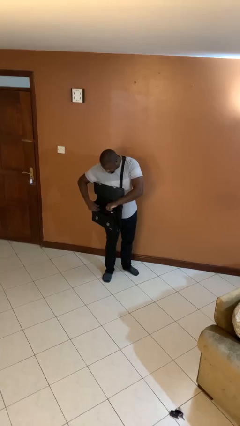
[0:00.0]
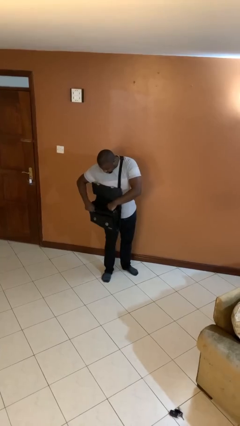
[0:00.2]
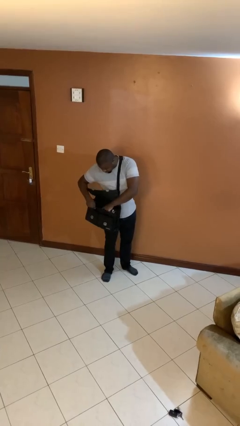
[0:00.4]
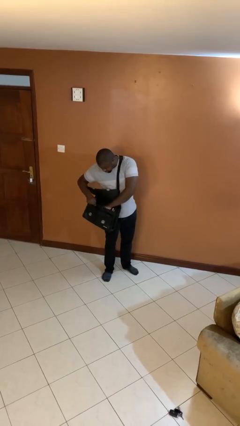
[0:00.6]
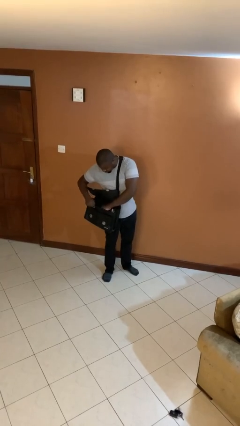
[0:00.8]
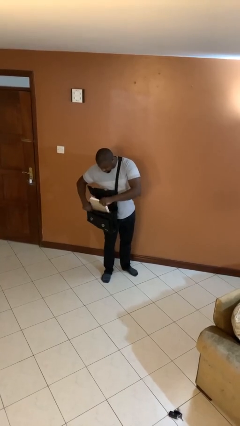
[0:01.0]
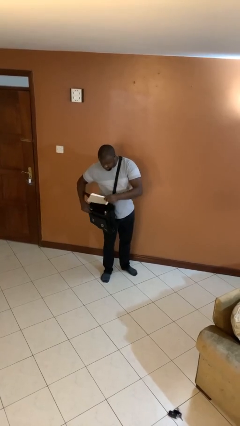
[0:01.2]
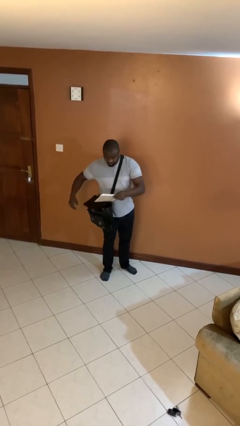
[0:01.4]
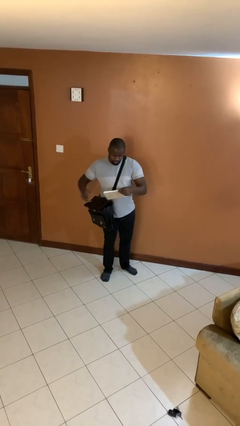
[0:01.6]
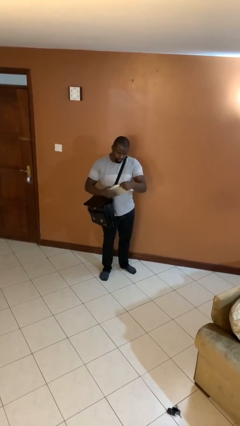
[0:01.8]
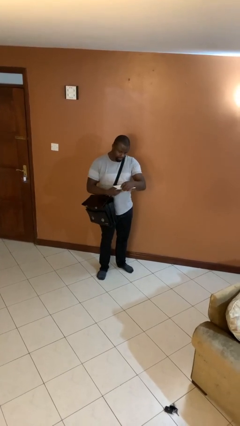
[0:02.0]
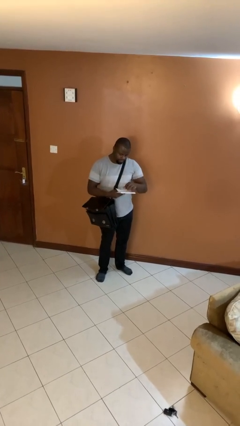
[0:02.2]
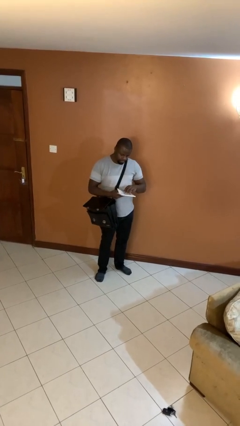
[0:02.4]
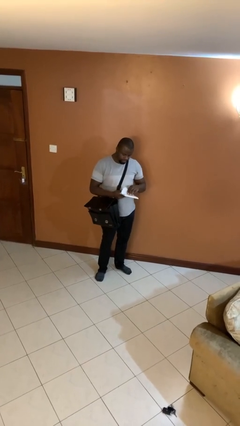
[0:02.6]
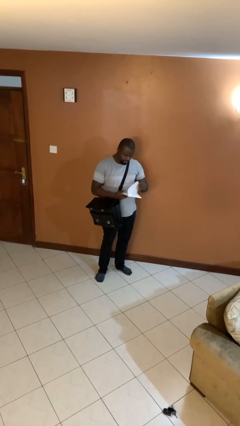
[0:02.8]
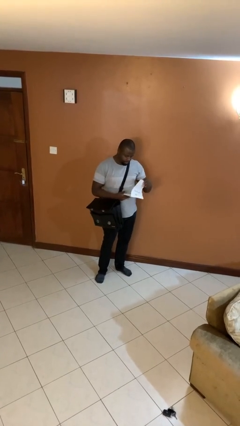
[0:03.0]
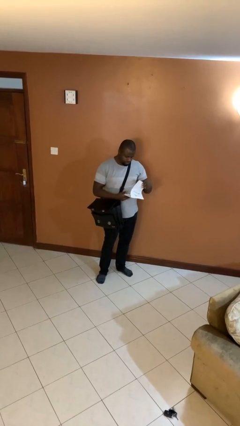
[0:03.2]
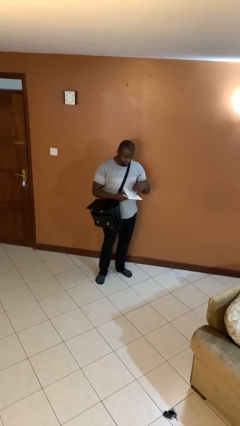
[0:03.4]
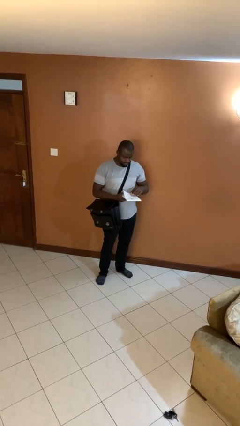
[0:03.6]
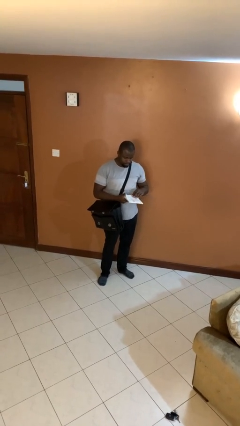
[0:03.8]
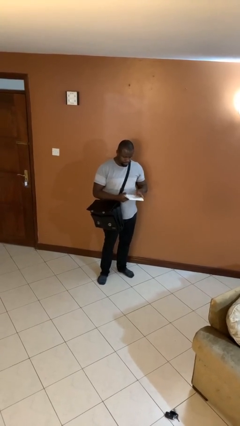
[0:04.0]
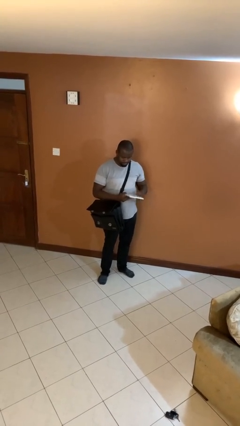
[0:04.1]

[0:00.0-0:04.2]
person takes object from purse

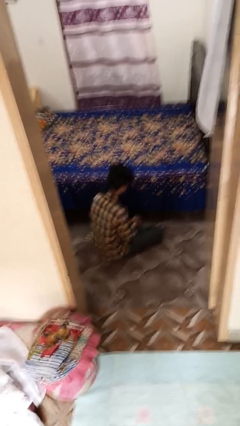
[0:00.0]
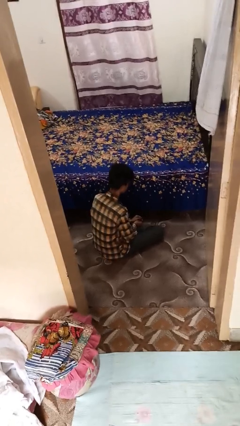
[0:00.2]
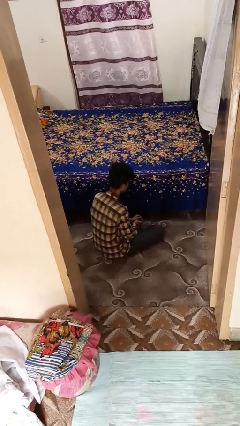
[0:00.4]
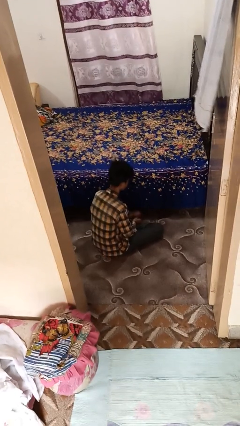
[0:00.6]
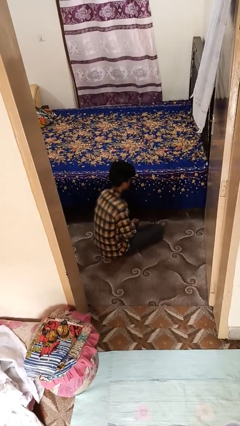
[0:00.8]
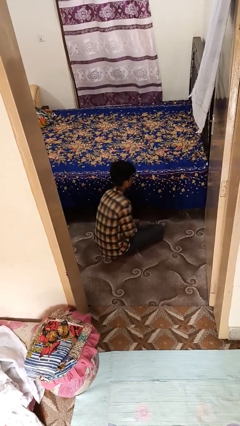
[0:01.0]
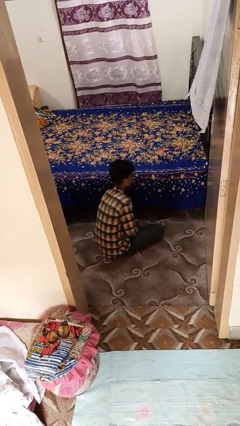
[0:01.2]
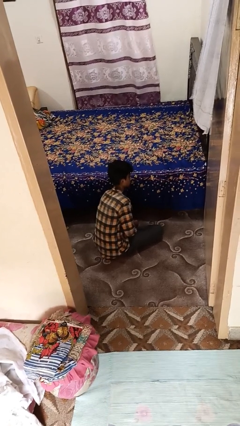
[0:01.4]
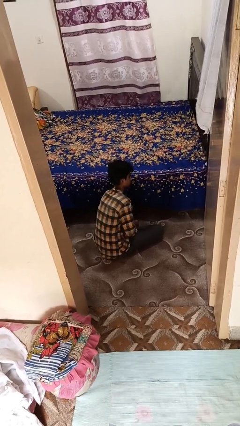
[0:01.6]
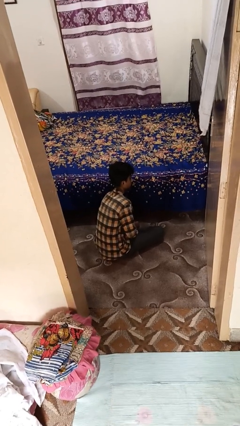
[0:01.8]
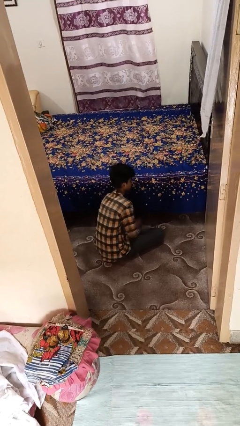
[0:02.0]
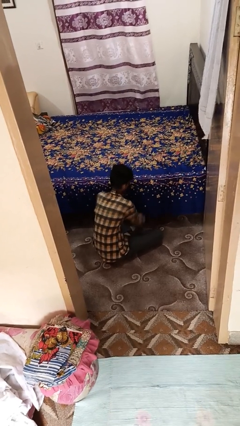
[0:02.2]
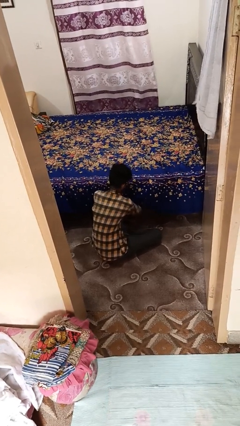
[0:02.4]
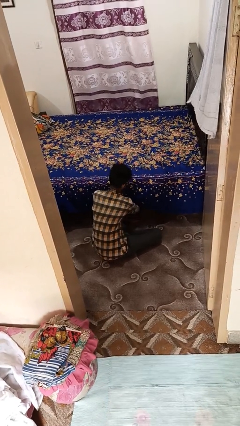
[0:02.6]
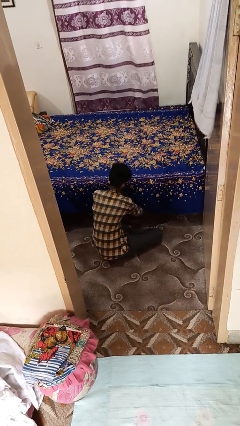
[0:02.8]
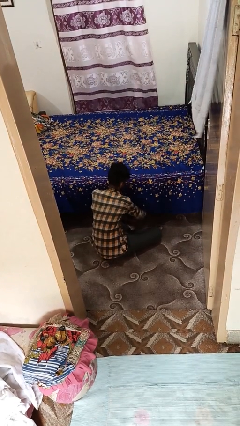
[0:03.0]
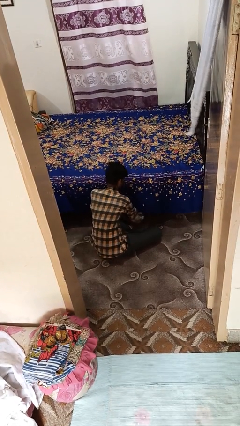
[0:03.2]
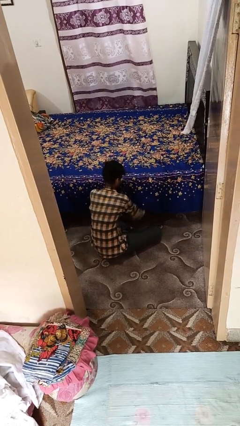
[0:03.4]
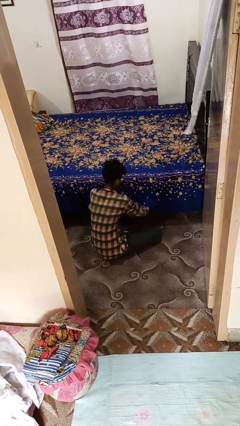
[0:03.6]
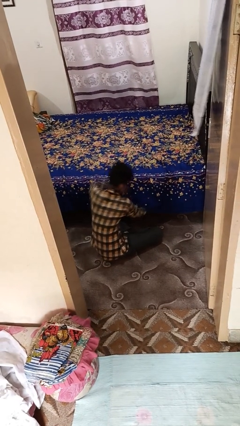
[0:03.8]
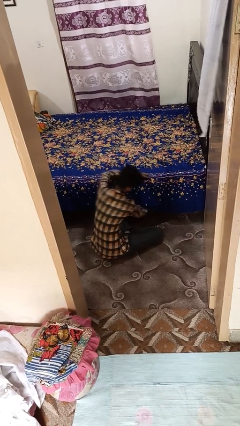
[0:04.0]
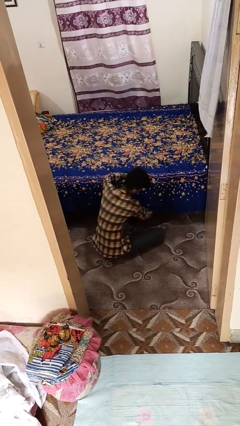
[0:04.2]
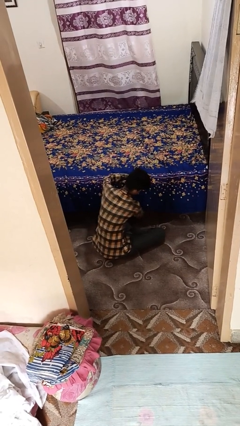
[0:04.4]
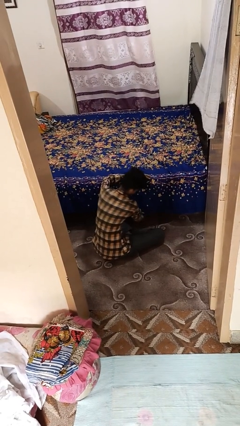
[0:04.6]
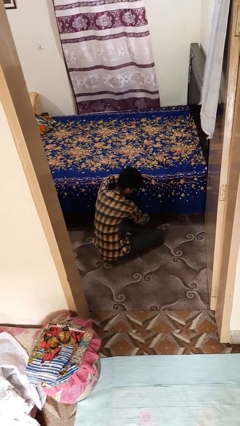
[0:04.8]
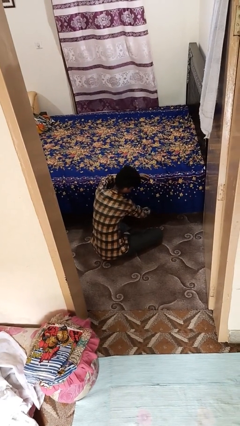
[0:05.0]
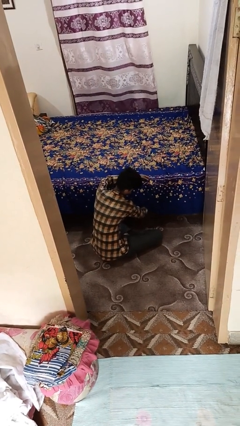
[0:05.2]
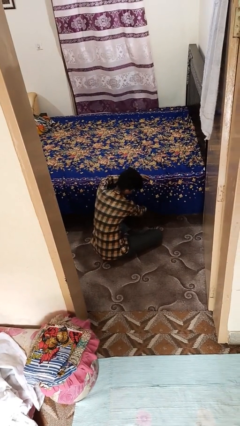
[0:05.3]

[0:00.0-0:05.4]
person searches under bed

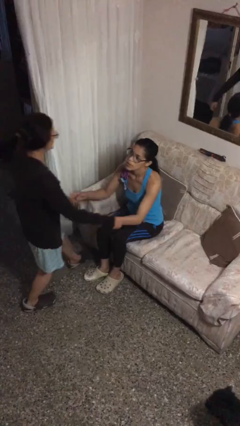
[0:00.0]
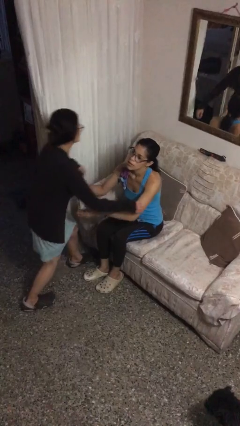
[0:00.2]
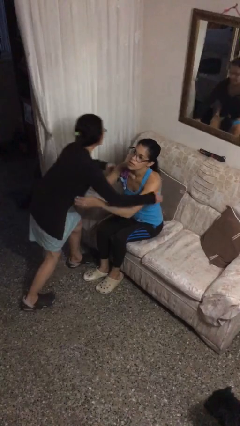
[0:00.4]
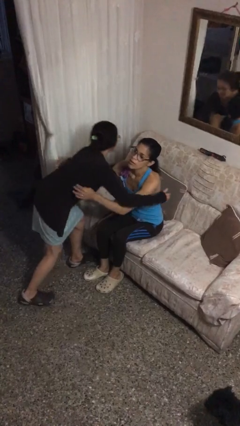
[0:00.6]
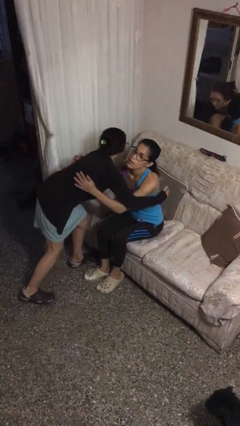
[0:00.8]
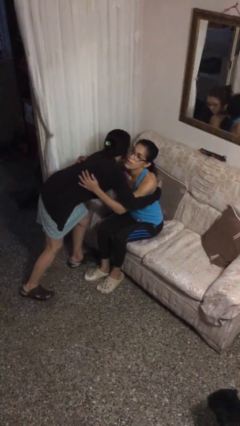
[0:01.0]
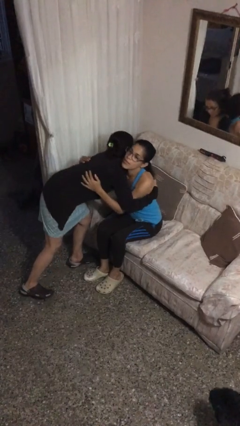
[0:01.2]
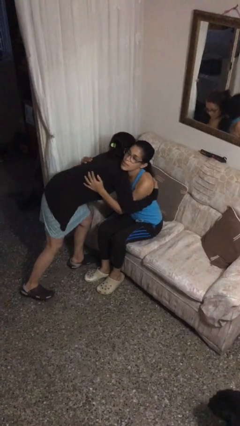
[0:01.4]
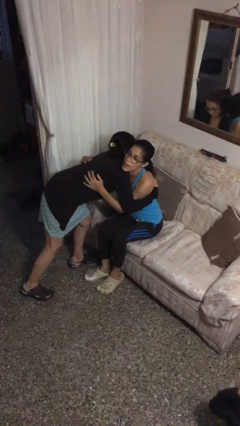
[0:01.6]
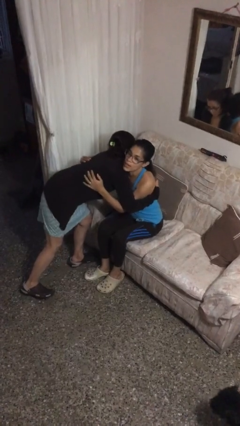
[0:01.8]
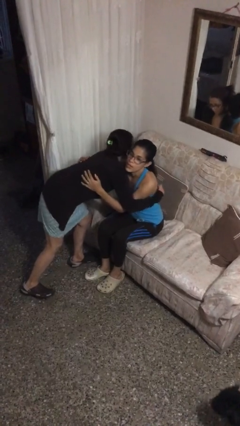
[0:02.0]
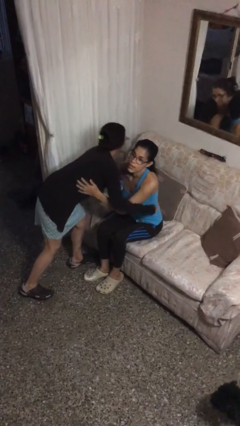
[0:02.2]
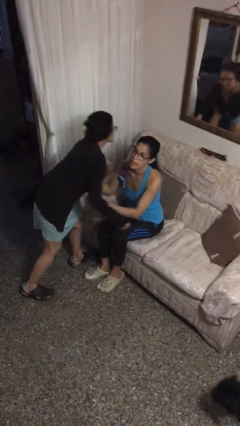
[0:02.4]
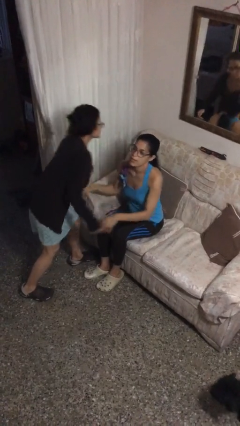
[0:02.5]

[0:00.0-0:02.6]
person embraces person

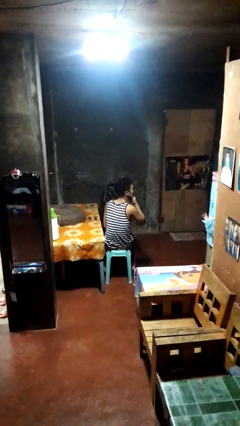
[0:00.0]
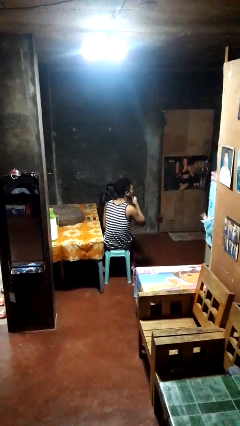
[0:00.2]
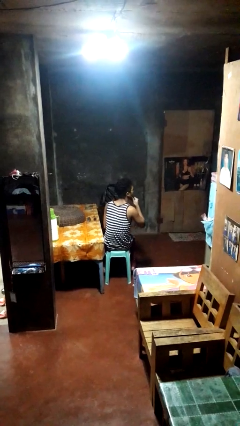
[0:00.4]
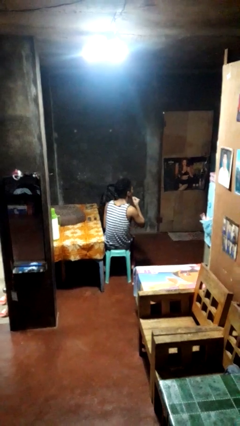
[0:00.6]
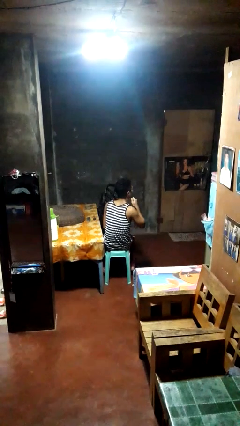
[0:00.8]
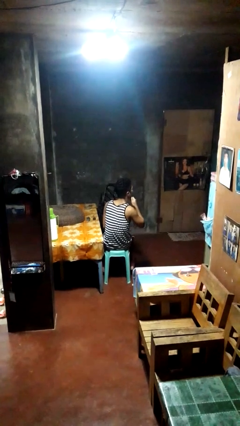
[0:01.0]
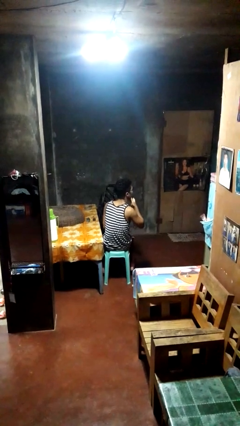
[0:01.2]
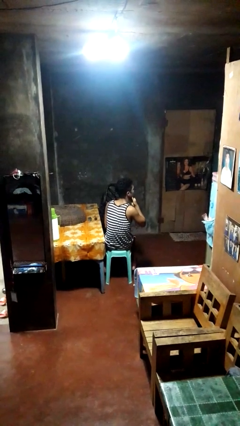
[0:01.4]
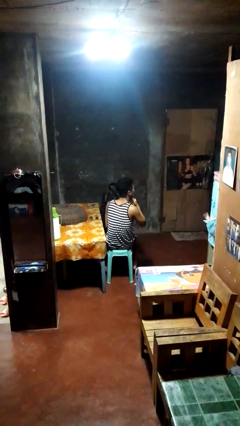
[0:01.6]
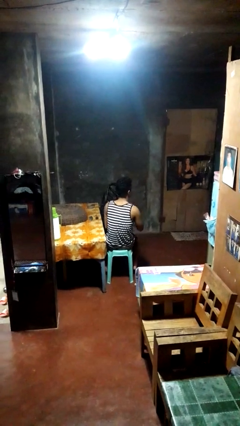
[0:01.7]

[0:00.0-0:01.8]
person strokes chin

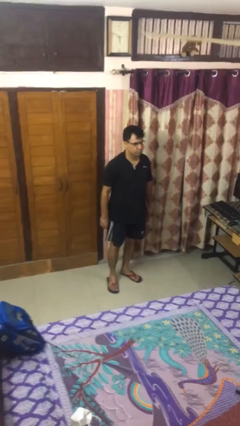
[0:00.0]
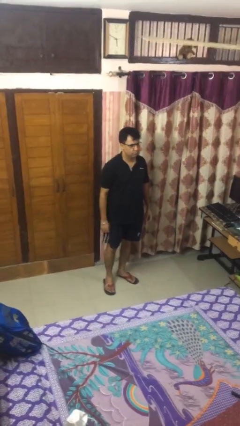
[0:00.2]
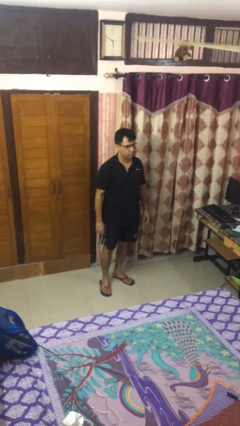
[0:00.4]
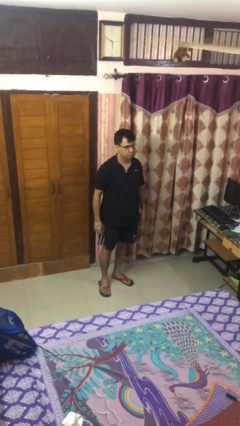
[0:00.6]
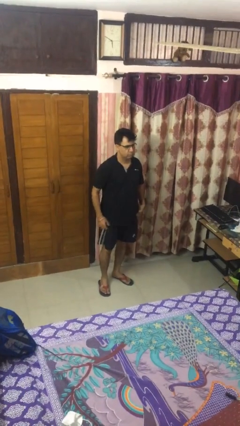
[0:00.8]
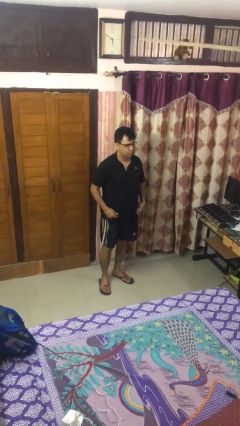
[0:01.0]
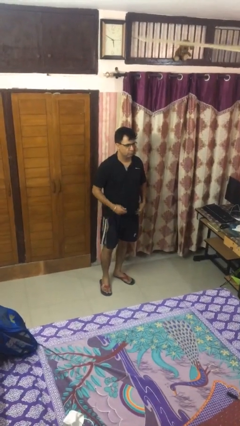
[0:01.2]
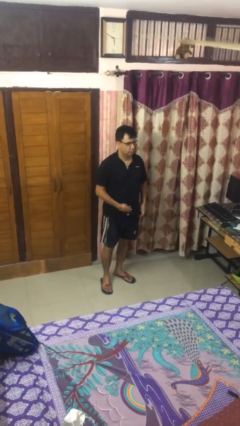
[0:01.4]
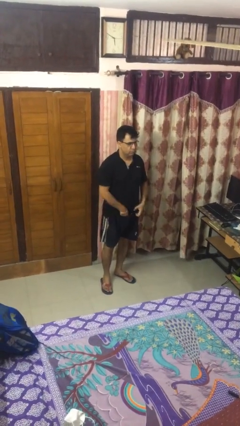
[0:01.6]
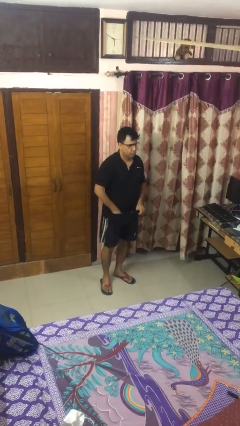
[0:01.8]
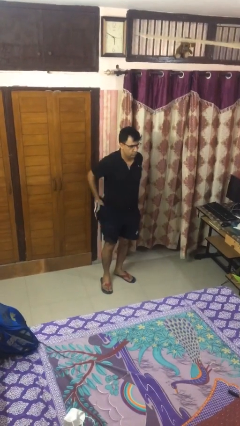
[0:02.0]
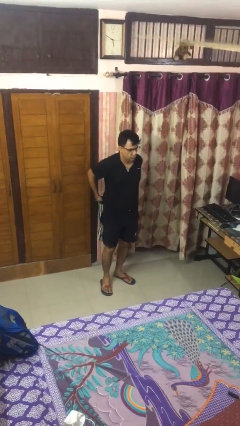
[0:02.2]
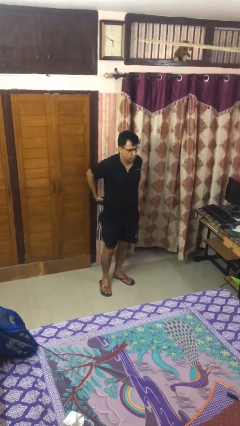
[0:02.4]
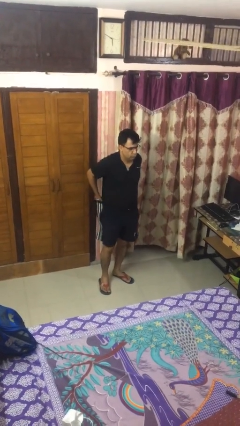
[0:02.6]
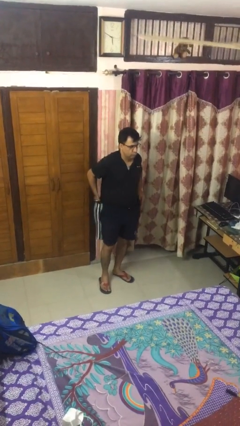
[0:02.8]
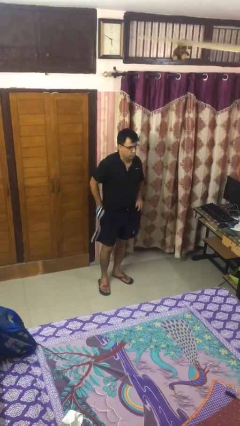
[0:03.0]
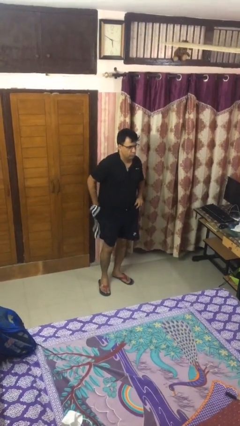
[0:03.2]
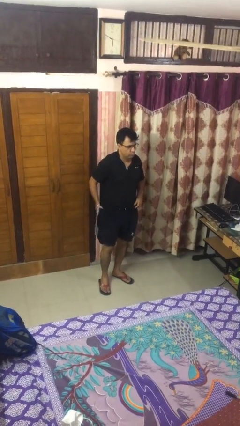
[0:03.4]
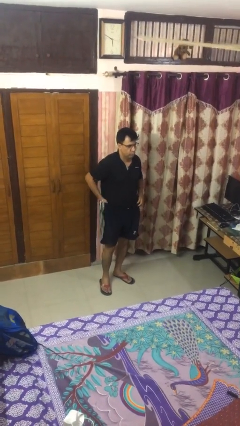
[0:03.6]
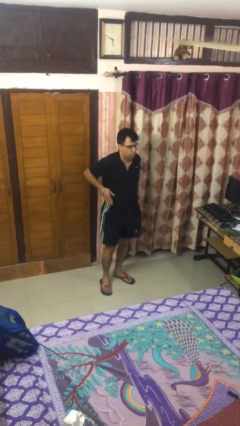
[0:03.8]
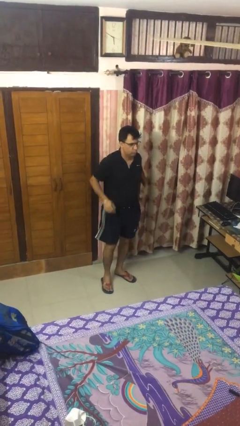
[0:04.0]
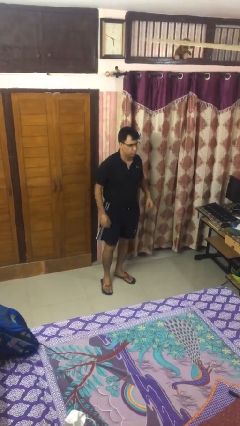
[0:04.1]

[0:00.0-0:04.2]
person tucks in shirt
